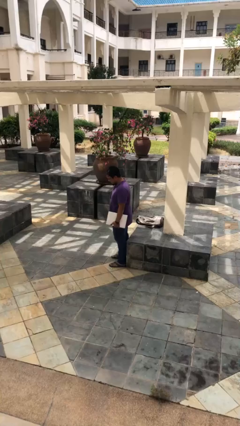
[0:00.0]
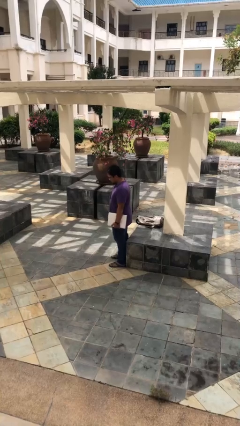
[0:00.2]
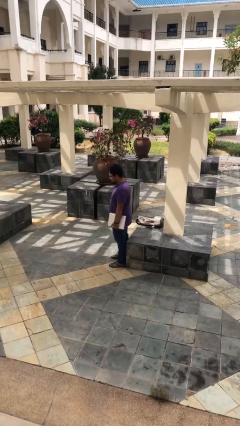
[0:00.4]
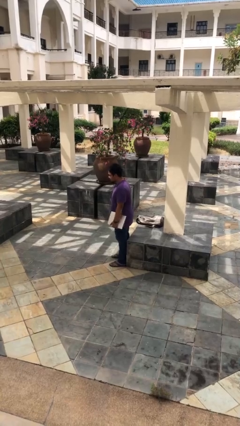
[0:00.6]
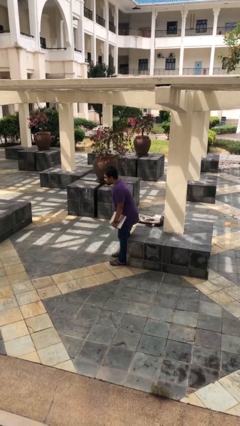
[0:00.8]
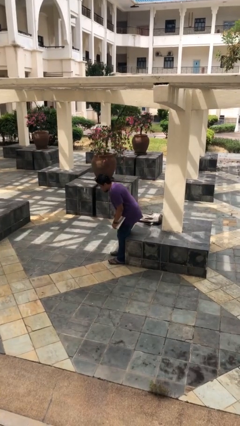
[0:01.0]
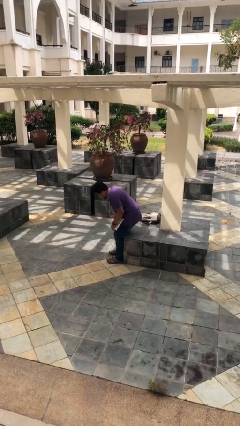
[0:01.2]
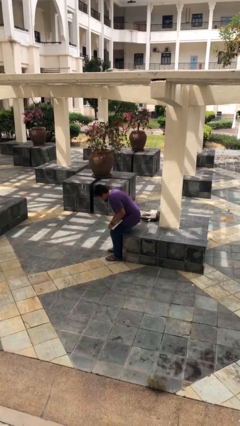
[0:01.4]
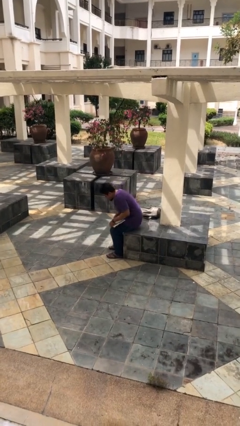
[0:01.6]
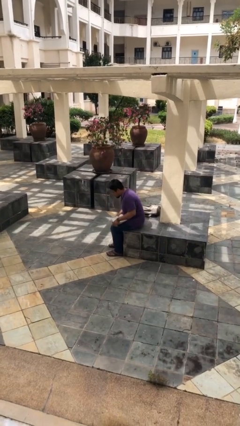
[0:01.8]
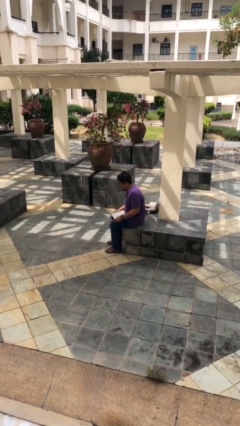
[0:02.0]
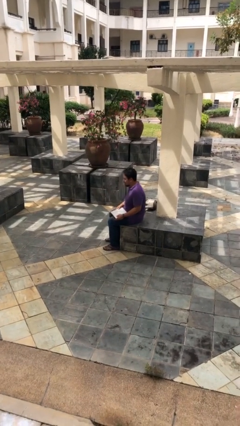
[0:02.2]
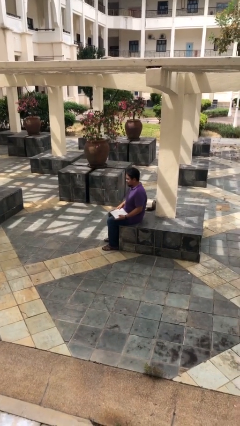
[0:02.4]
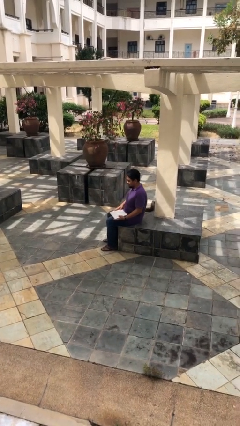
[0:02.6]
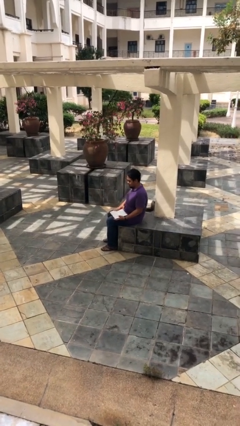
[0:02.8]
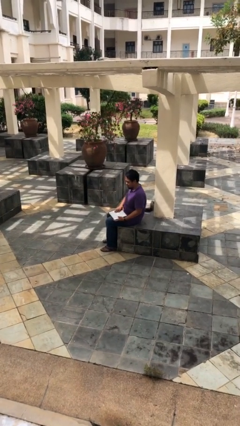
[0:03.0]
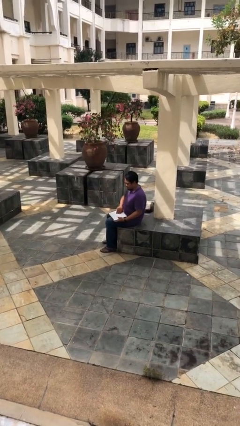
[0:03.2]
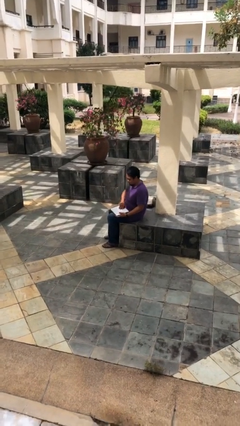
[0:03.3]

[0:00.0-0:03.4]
person sits down

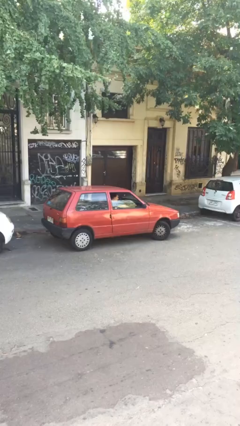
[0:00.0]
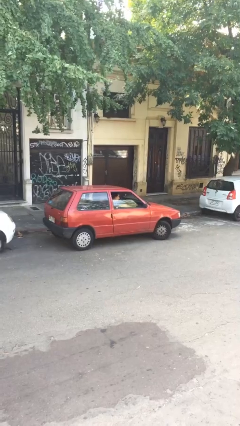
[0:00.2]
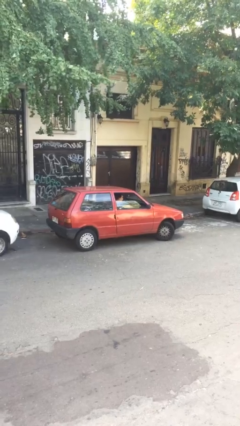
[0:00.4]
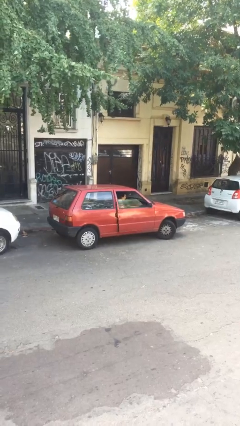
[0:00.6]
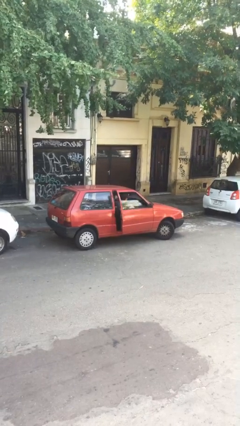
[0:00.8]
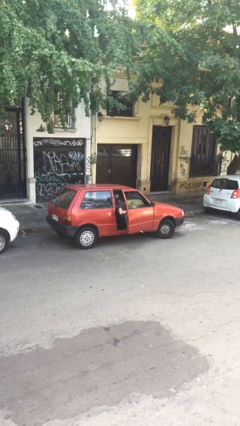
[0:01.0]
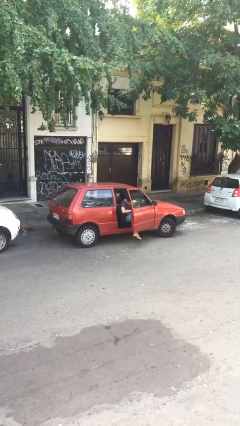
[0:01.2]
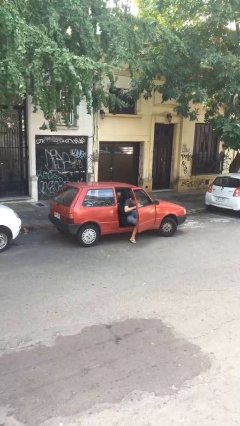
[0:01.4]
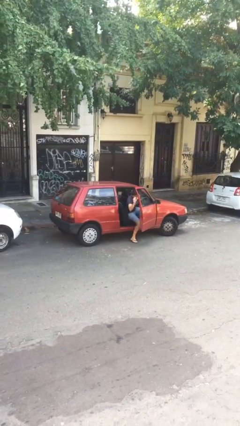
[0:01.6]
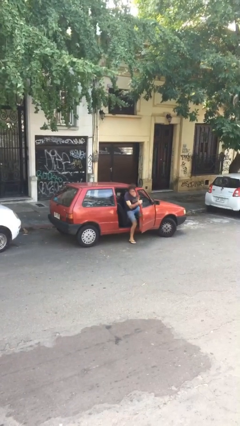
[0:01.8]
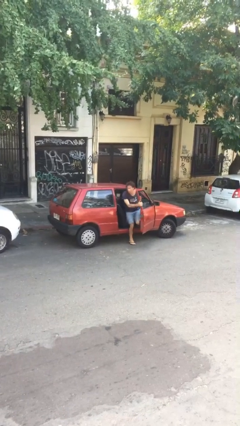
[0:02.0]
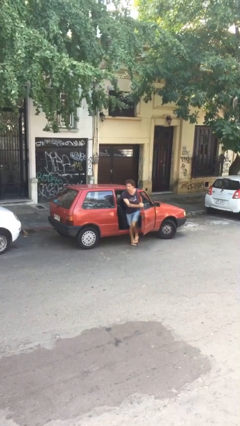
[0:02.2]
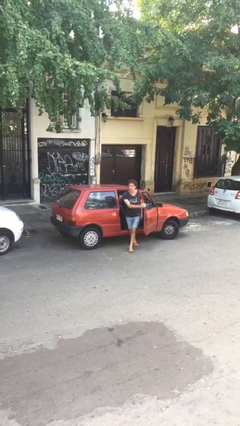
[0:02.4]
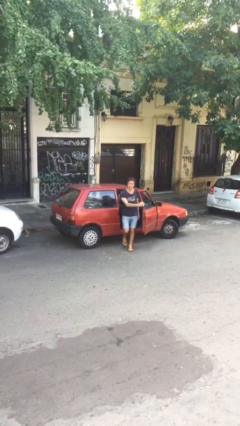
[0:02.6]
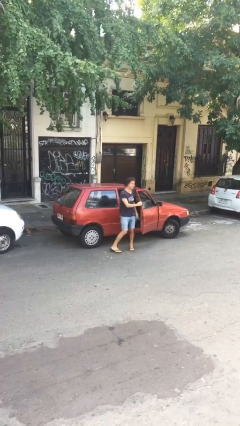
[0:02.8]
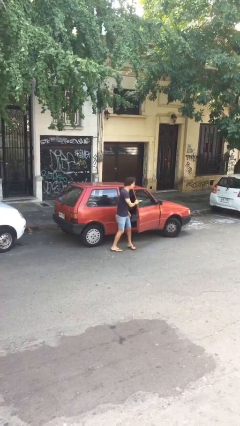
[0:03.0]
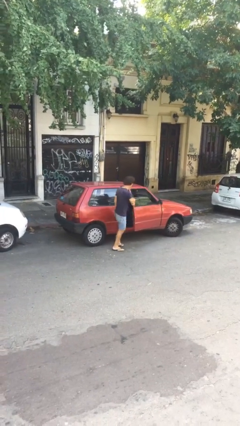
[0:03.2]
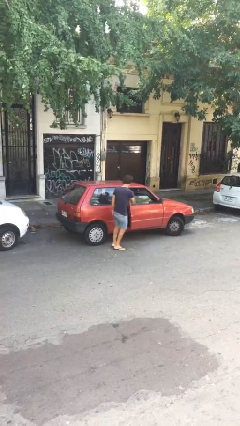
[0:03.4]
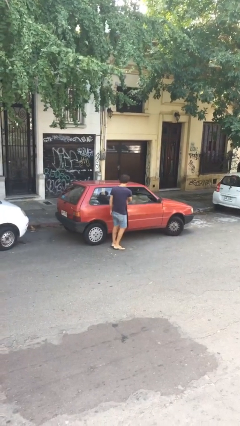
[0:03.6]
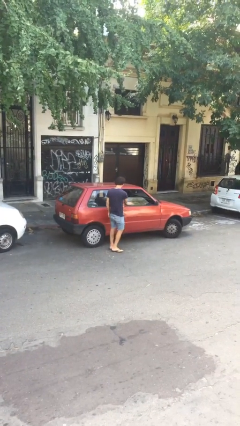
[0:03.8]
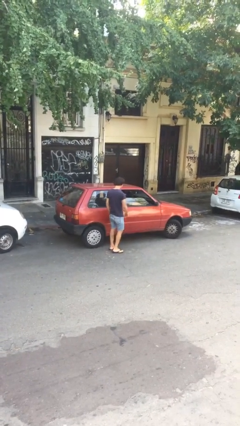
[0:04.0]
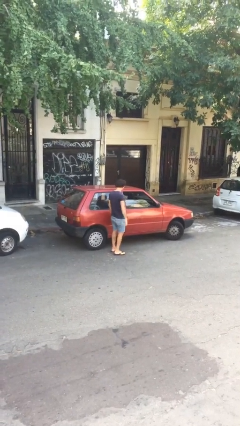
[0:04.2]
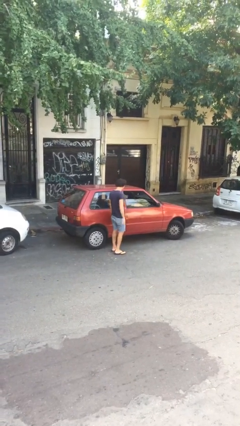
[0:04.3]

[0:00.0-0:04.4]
car drops off person

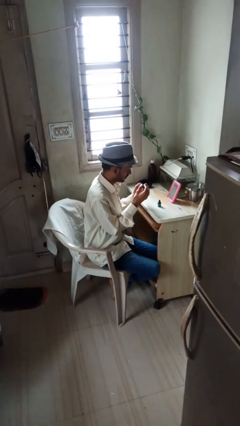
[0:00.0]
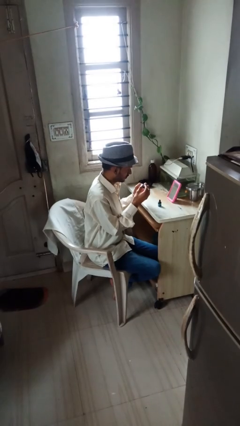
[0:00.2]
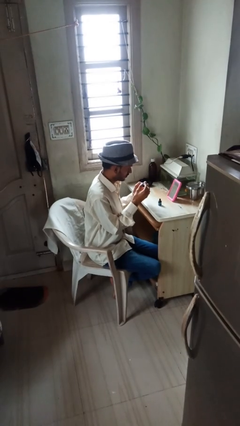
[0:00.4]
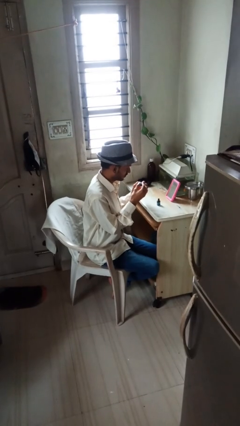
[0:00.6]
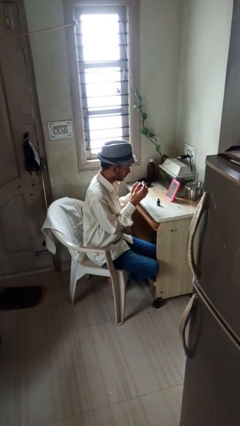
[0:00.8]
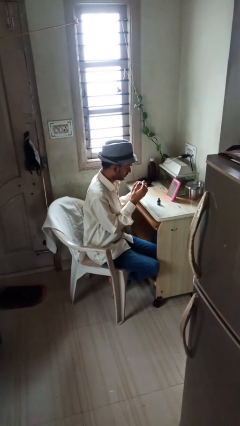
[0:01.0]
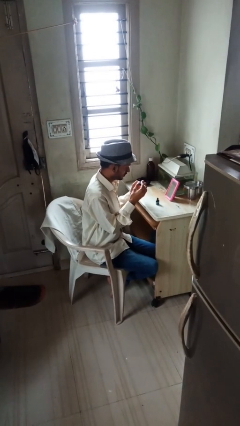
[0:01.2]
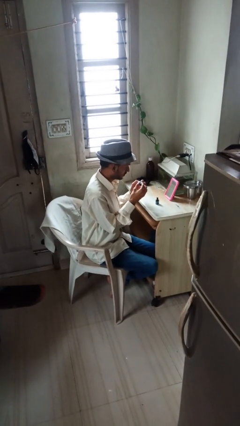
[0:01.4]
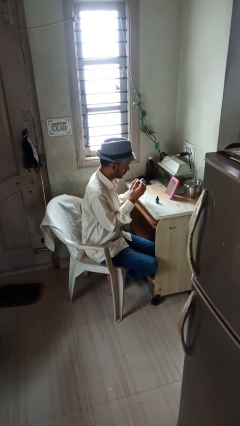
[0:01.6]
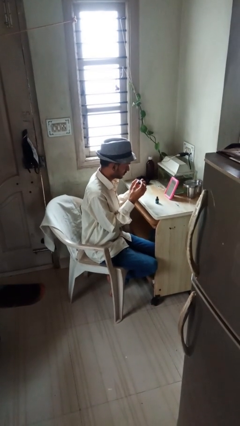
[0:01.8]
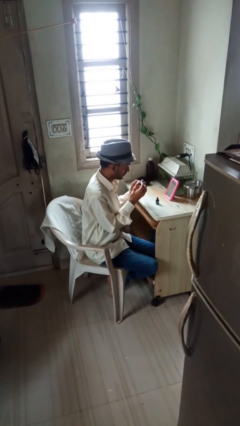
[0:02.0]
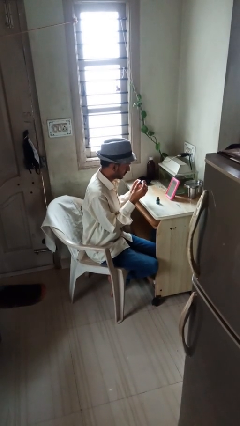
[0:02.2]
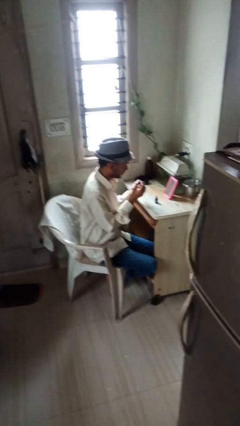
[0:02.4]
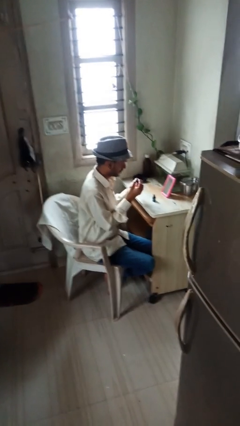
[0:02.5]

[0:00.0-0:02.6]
person paints fingernails

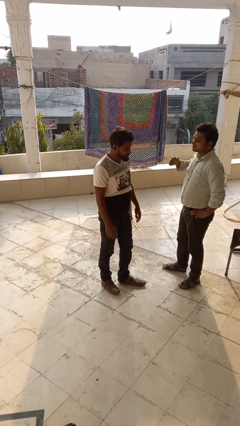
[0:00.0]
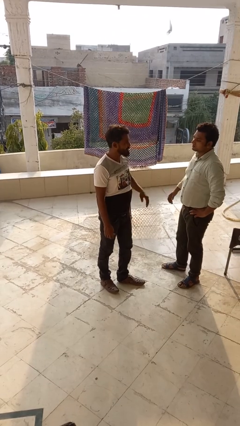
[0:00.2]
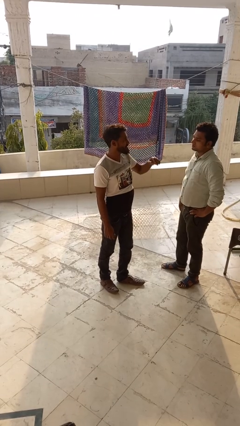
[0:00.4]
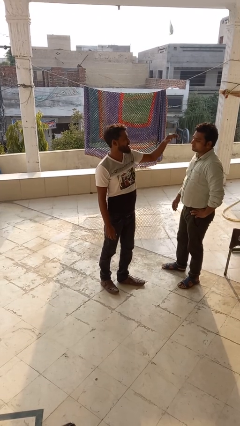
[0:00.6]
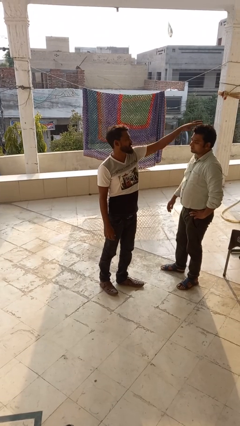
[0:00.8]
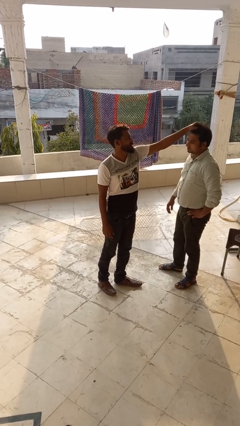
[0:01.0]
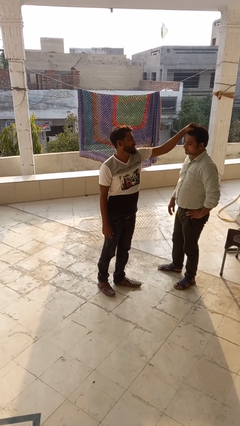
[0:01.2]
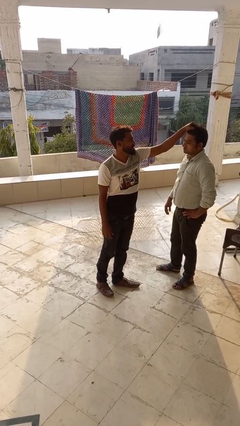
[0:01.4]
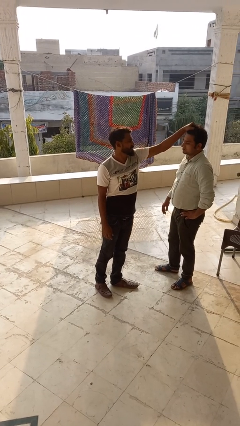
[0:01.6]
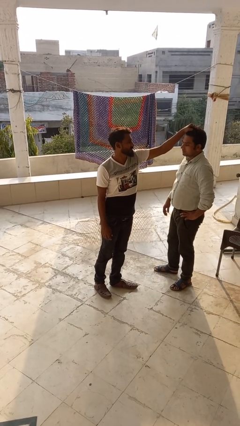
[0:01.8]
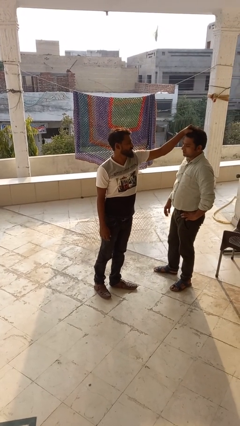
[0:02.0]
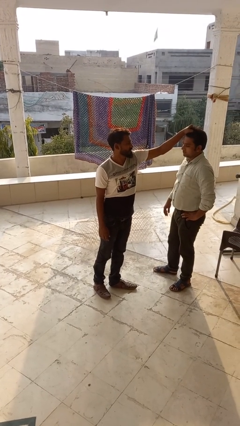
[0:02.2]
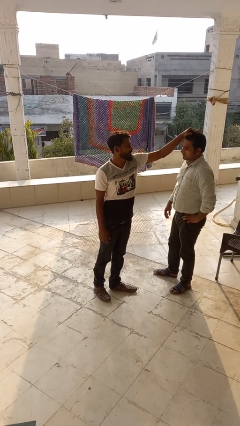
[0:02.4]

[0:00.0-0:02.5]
person grabs person by hair

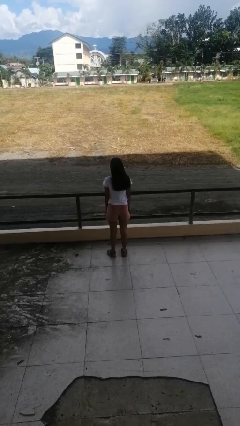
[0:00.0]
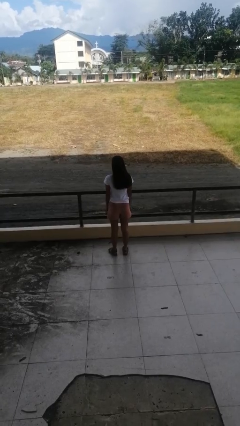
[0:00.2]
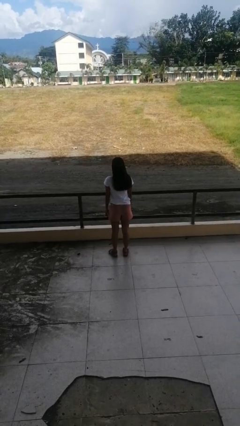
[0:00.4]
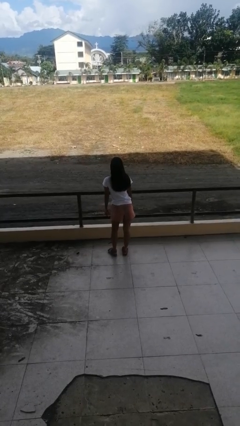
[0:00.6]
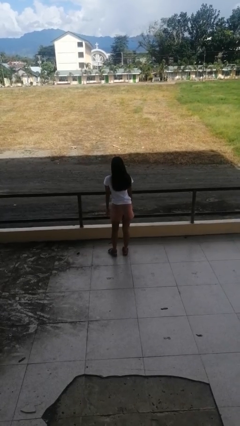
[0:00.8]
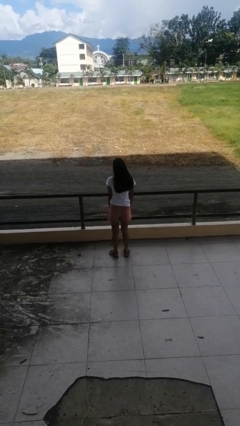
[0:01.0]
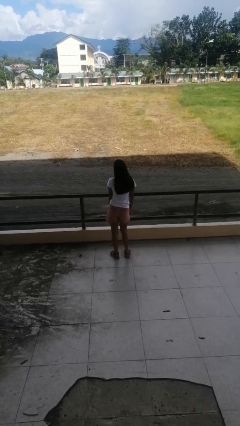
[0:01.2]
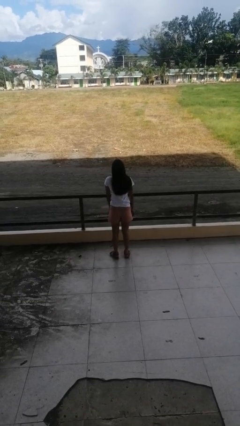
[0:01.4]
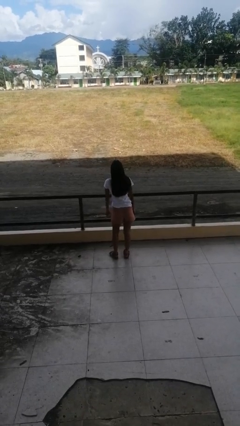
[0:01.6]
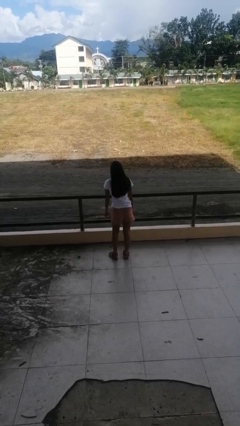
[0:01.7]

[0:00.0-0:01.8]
person wiggles hips

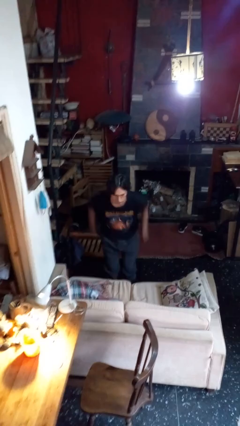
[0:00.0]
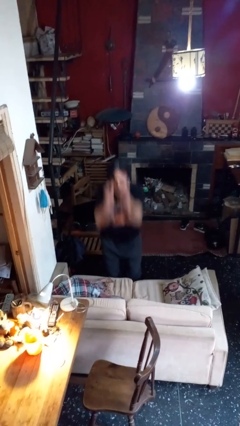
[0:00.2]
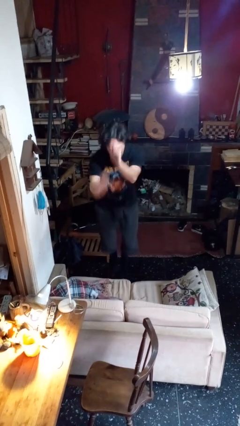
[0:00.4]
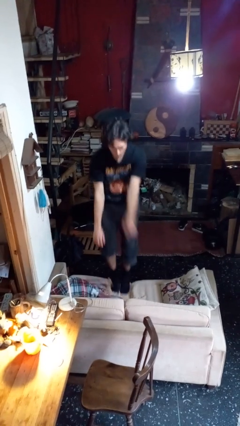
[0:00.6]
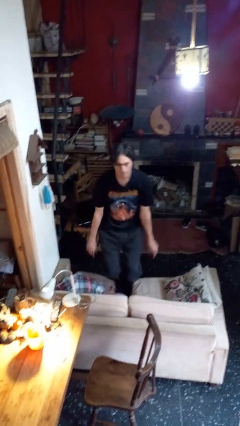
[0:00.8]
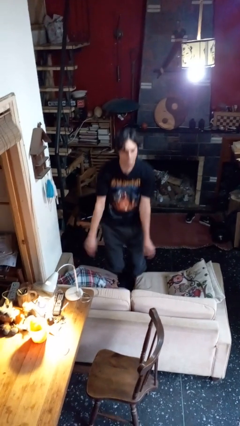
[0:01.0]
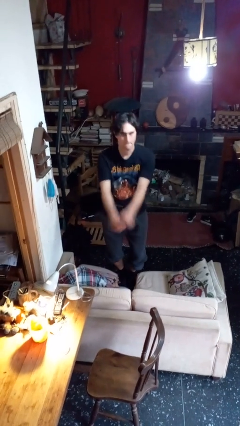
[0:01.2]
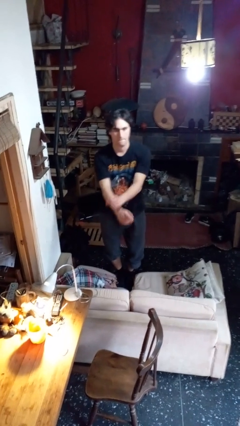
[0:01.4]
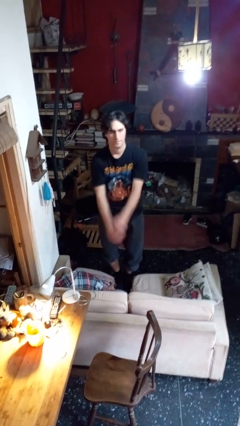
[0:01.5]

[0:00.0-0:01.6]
person climbs on couch

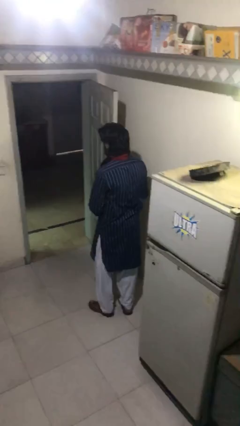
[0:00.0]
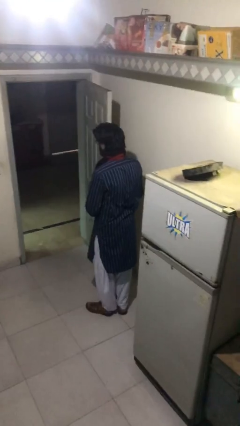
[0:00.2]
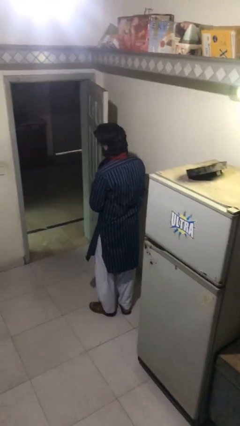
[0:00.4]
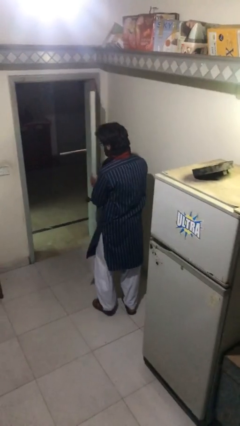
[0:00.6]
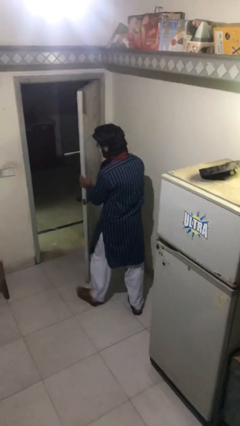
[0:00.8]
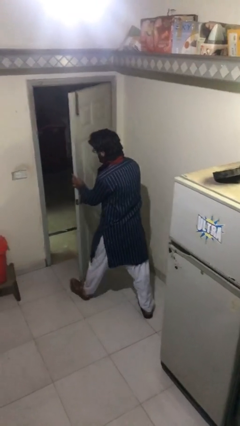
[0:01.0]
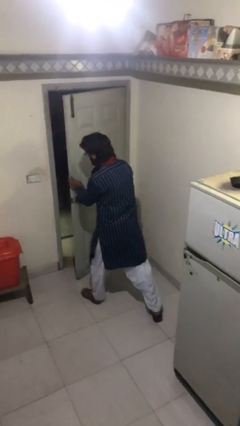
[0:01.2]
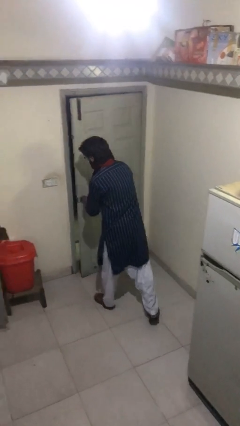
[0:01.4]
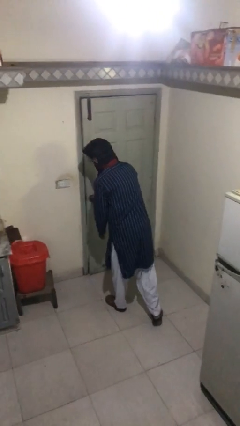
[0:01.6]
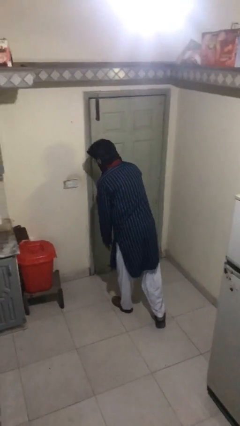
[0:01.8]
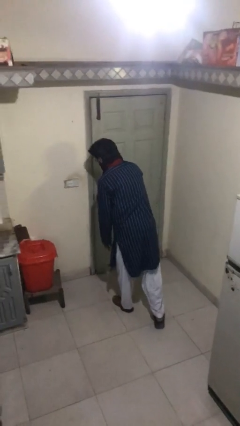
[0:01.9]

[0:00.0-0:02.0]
person closes facility door
